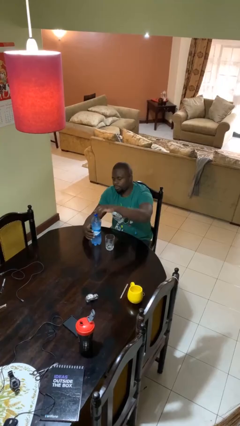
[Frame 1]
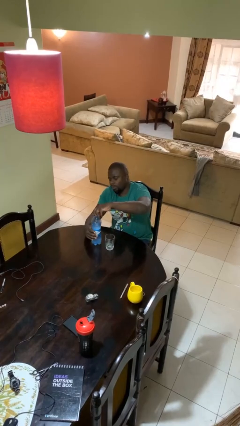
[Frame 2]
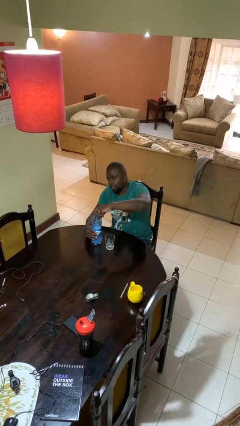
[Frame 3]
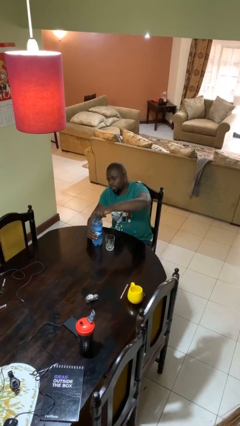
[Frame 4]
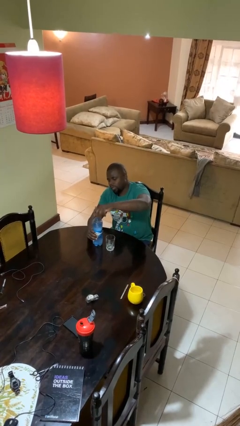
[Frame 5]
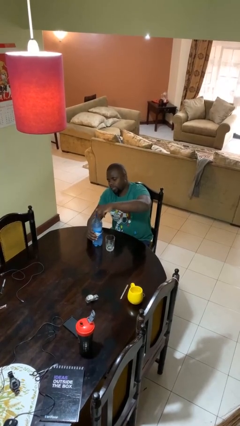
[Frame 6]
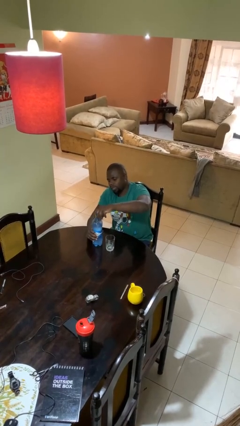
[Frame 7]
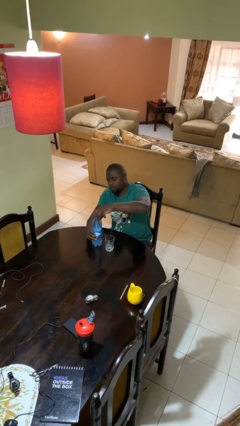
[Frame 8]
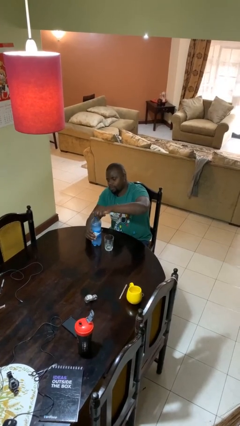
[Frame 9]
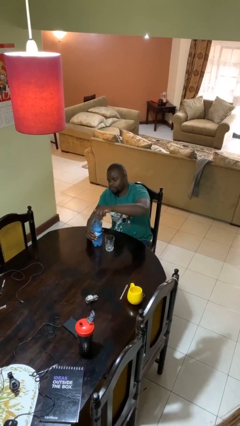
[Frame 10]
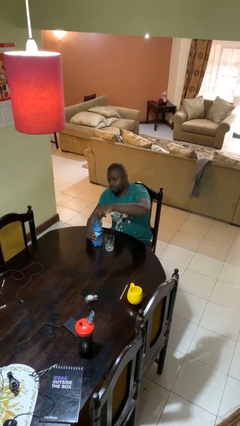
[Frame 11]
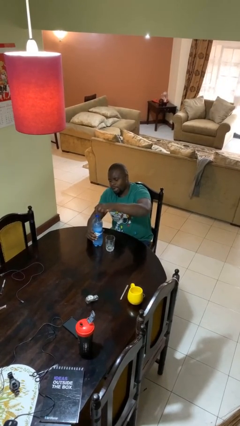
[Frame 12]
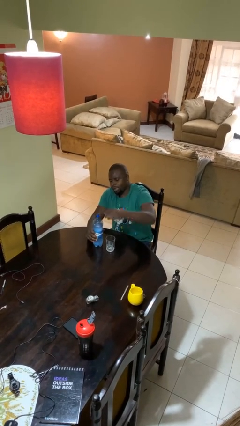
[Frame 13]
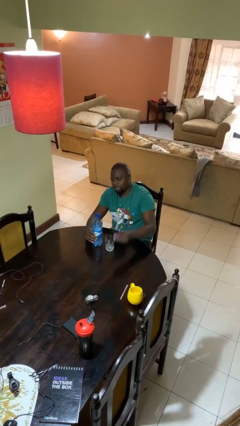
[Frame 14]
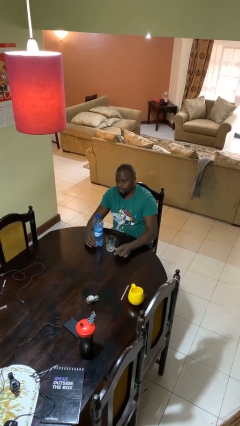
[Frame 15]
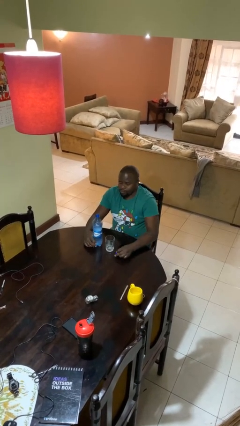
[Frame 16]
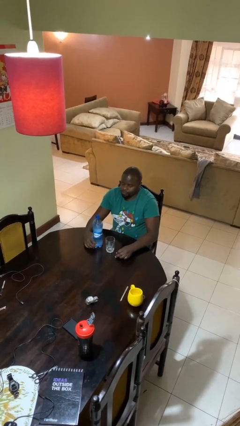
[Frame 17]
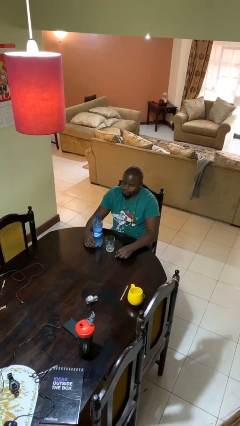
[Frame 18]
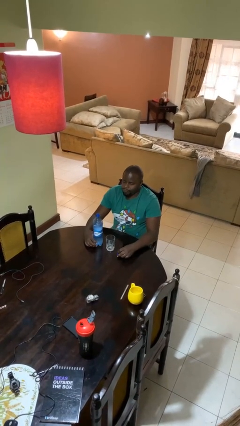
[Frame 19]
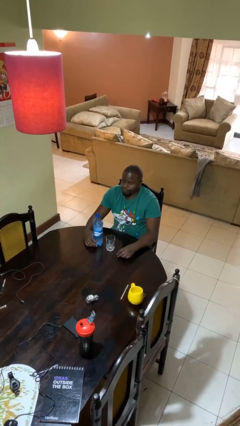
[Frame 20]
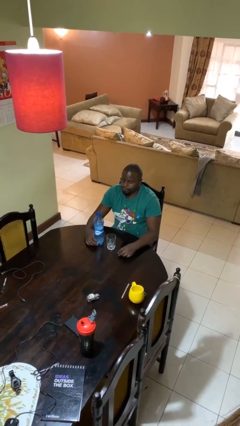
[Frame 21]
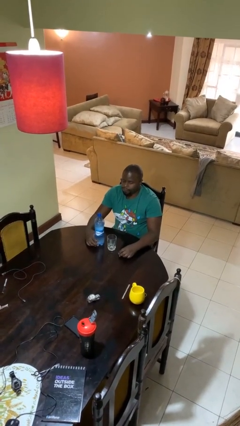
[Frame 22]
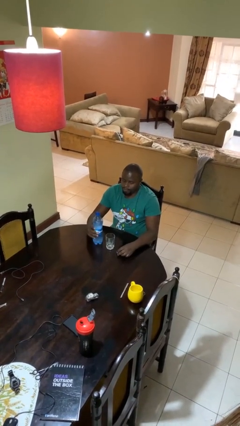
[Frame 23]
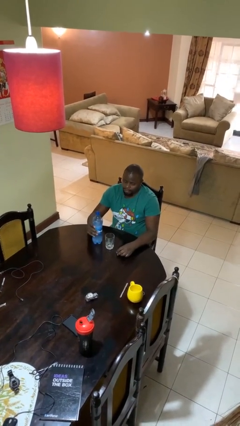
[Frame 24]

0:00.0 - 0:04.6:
person unscrews lid from bottle

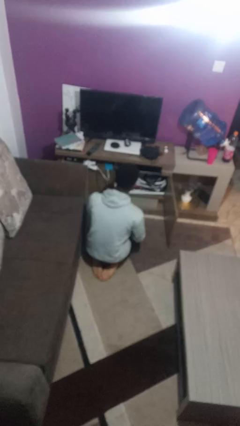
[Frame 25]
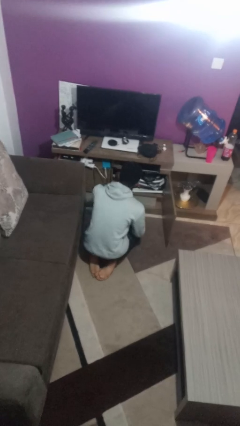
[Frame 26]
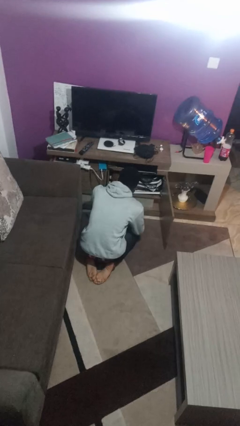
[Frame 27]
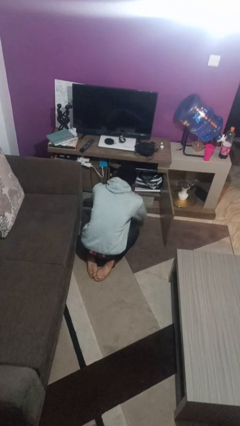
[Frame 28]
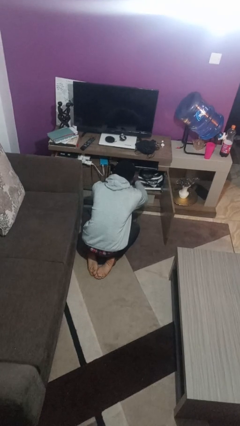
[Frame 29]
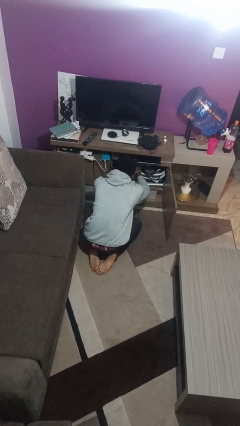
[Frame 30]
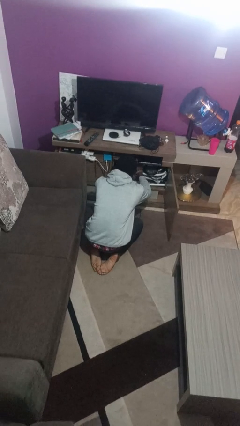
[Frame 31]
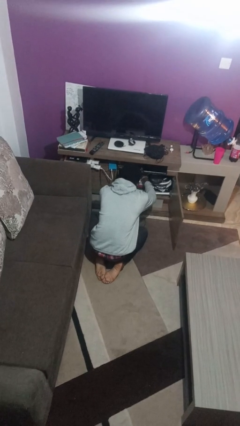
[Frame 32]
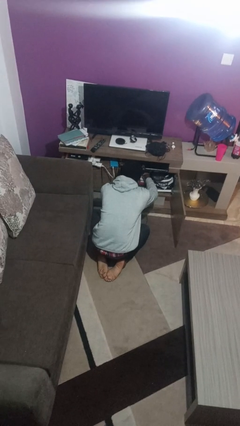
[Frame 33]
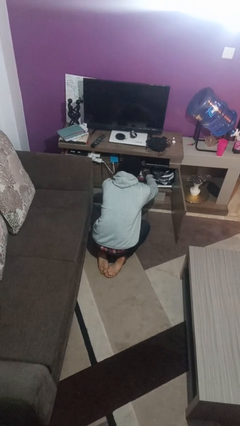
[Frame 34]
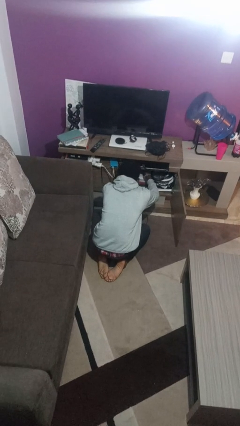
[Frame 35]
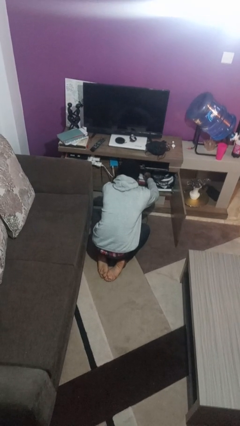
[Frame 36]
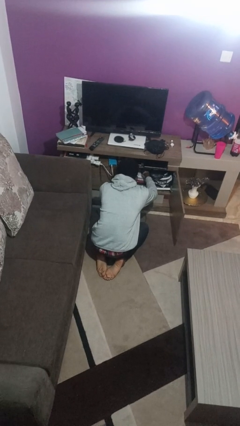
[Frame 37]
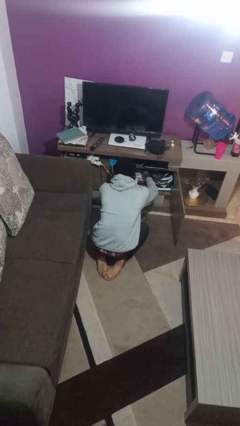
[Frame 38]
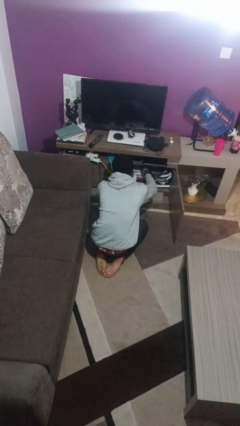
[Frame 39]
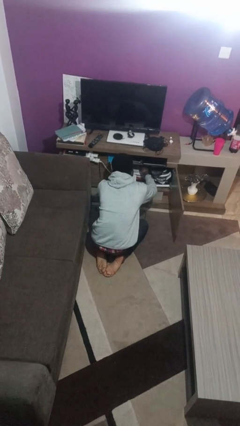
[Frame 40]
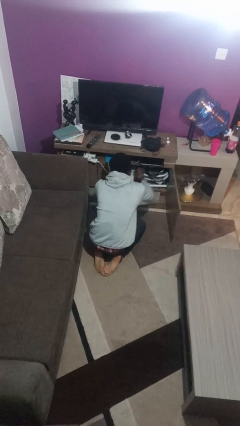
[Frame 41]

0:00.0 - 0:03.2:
person searches in cabinet

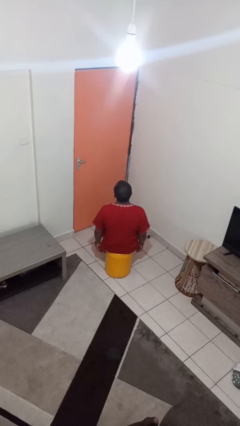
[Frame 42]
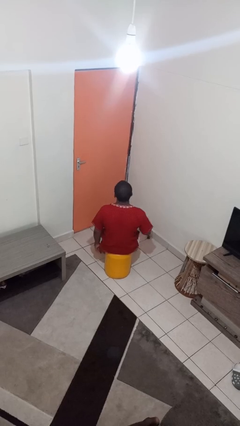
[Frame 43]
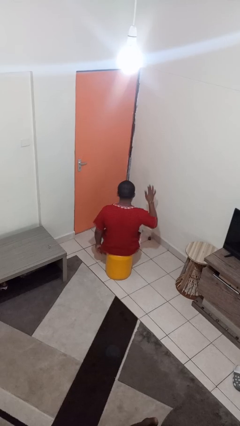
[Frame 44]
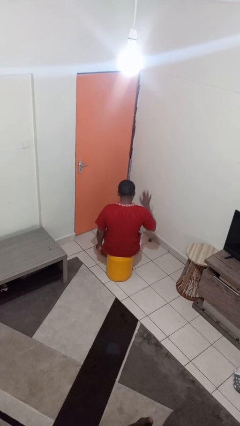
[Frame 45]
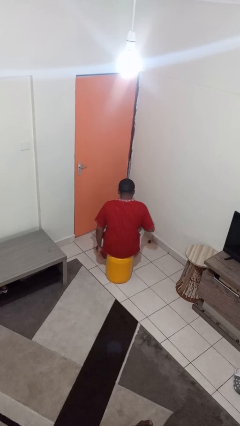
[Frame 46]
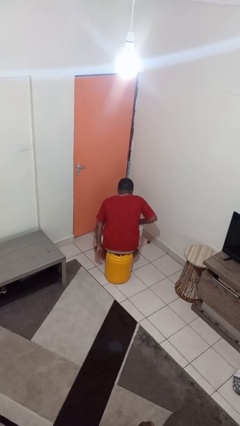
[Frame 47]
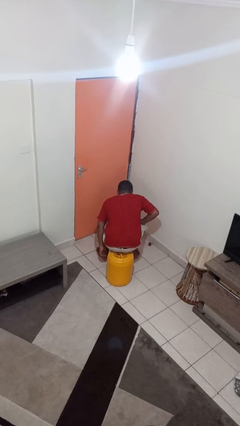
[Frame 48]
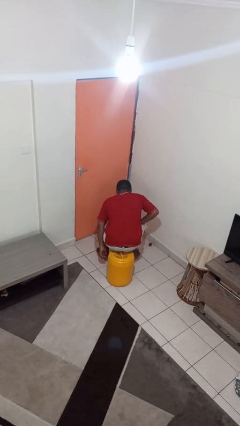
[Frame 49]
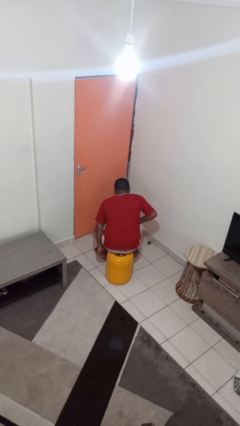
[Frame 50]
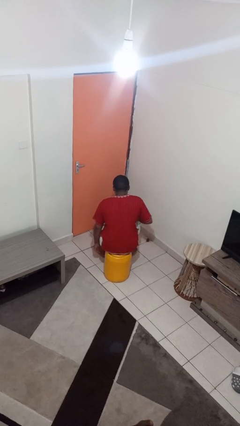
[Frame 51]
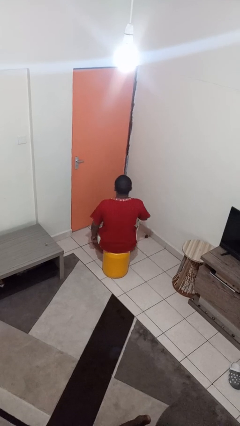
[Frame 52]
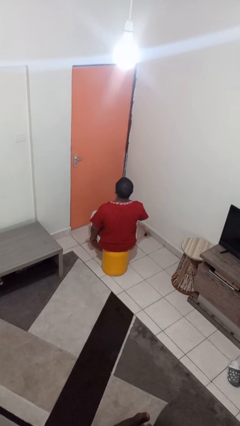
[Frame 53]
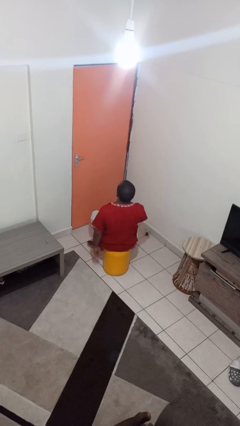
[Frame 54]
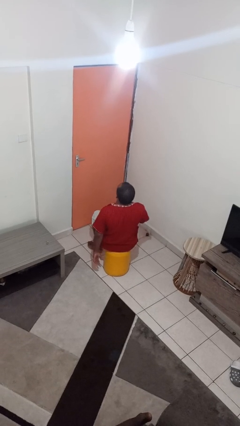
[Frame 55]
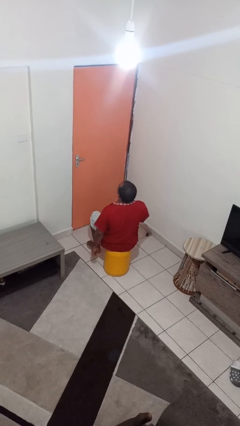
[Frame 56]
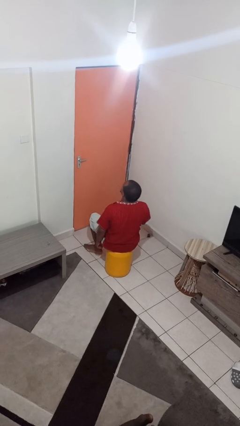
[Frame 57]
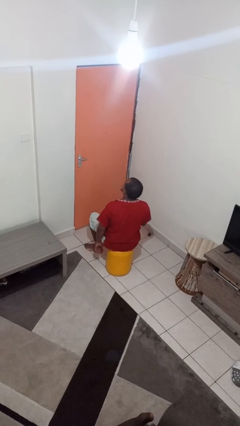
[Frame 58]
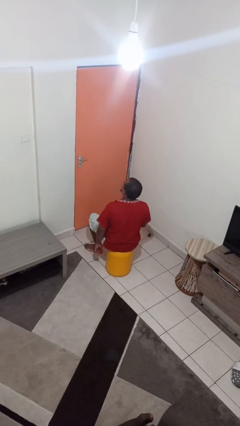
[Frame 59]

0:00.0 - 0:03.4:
person slaps hands on thighs

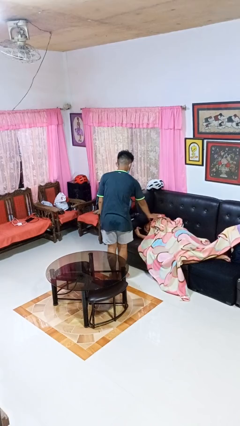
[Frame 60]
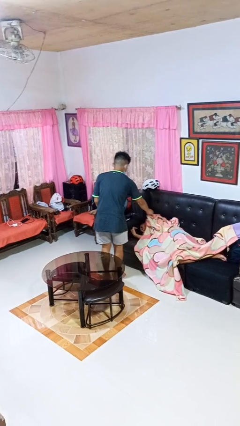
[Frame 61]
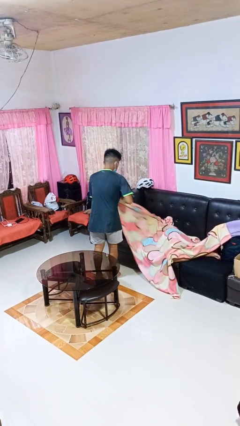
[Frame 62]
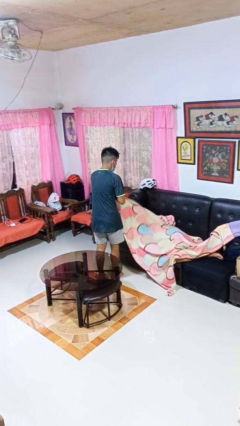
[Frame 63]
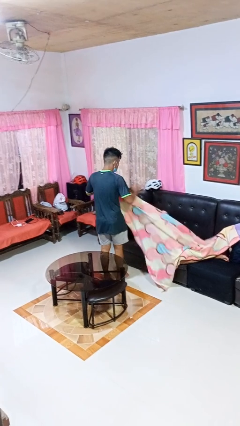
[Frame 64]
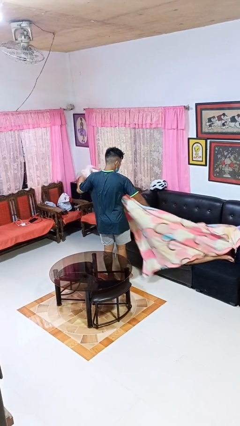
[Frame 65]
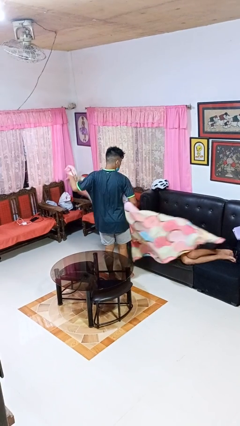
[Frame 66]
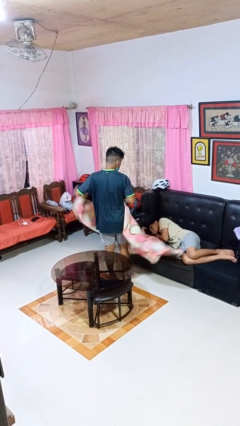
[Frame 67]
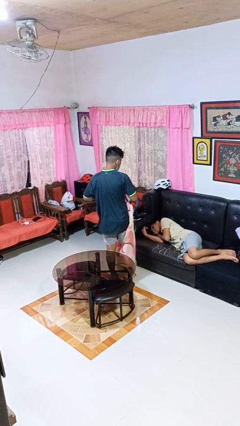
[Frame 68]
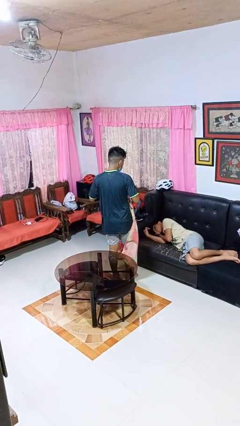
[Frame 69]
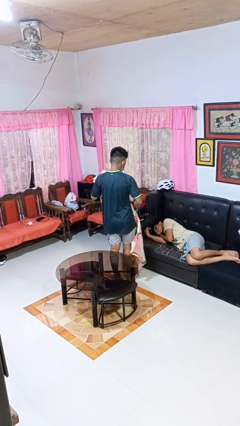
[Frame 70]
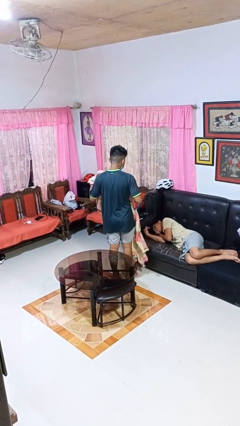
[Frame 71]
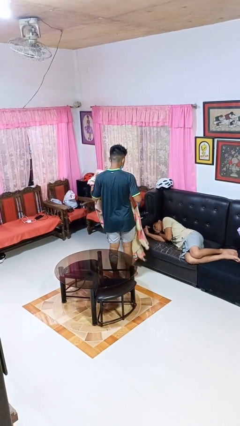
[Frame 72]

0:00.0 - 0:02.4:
person uncovers friend with blanket

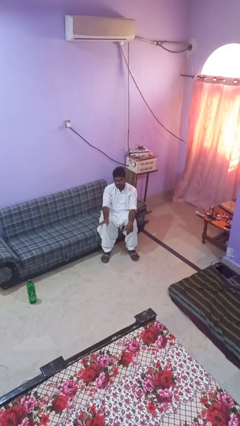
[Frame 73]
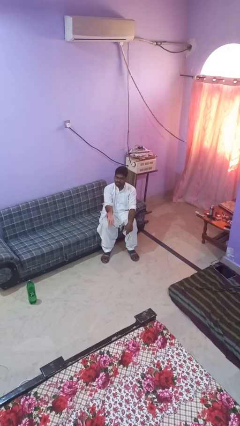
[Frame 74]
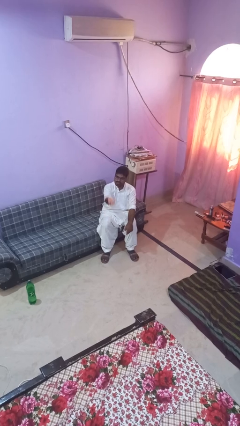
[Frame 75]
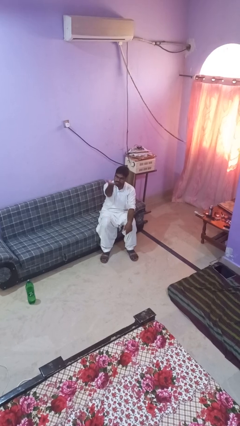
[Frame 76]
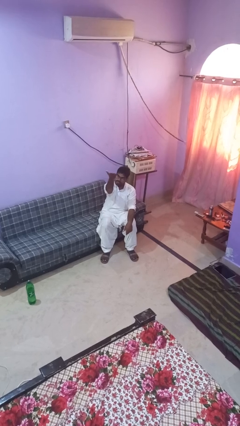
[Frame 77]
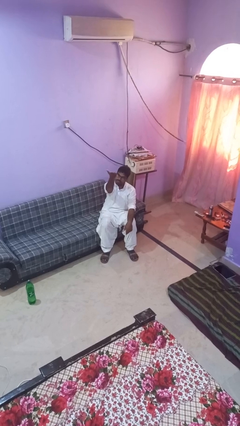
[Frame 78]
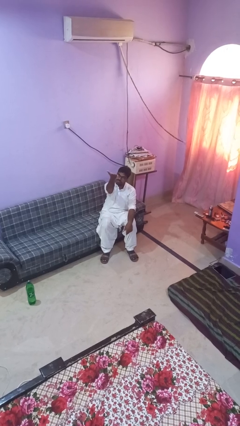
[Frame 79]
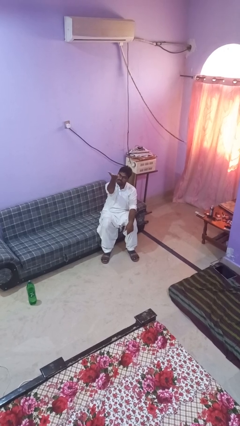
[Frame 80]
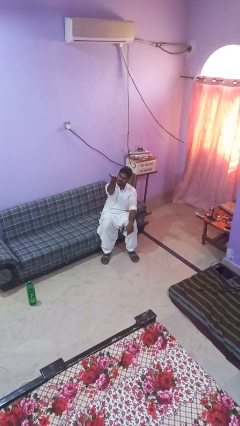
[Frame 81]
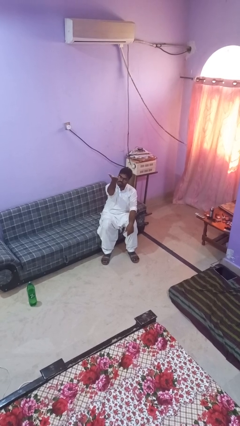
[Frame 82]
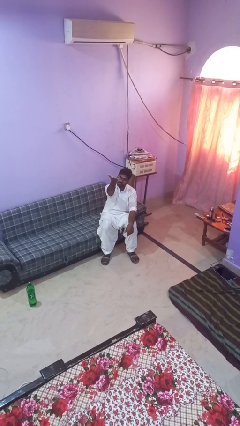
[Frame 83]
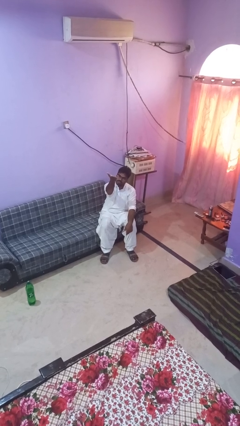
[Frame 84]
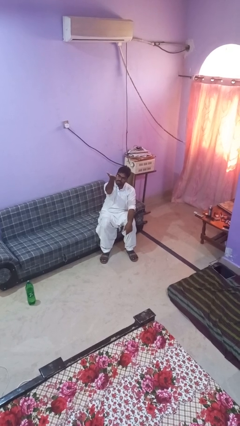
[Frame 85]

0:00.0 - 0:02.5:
person gestures swipe up

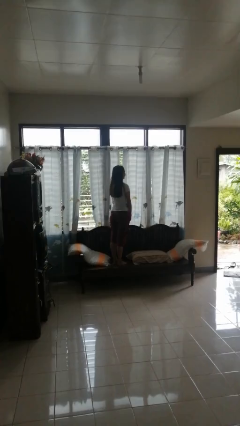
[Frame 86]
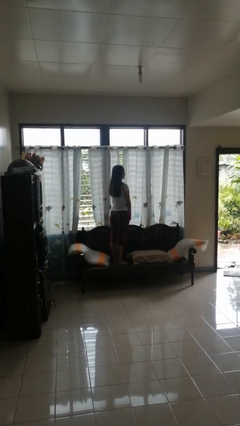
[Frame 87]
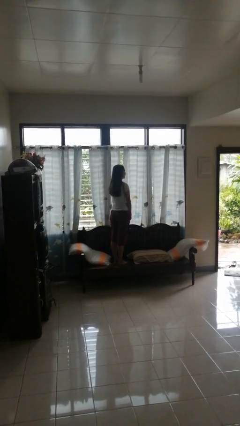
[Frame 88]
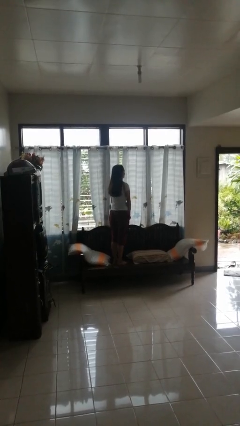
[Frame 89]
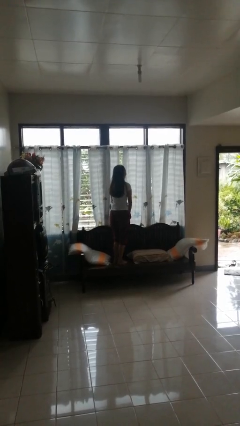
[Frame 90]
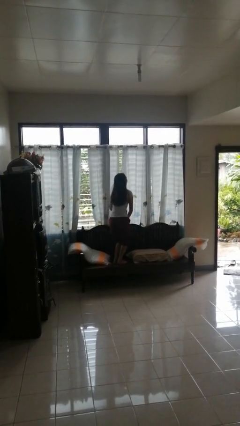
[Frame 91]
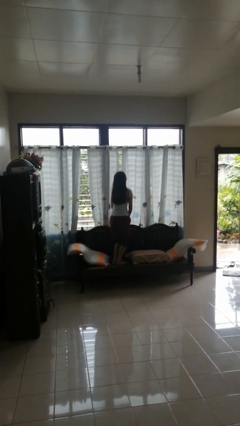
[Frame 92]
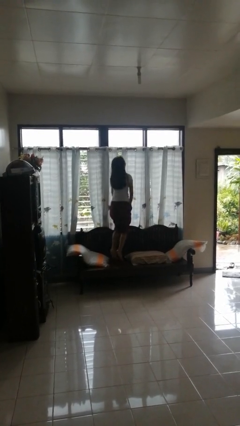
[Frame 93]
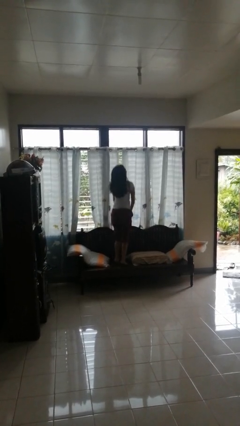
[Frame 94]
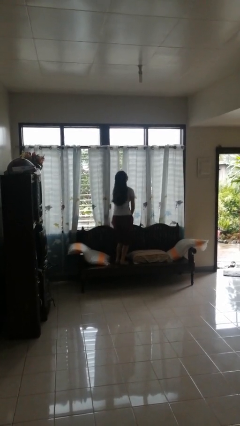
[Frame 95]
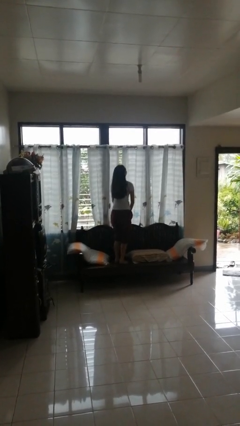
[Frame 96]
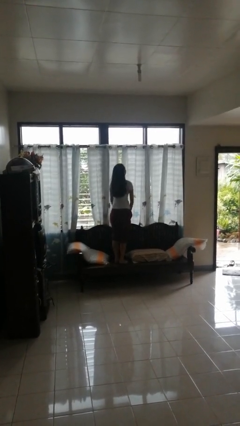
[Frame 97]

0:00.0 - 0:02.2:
person jumps on couch
